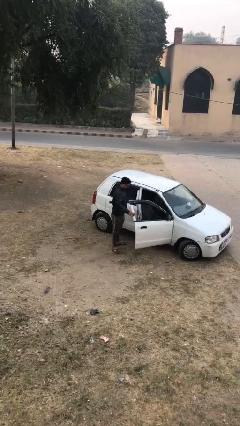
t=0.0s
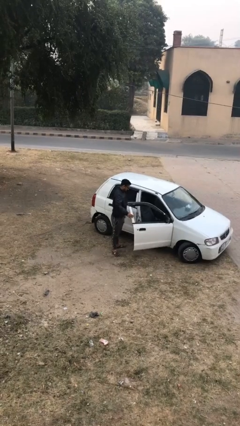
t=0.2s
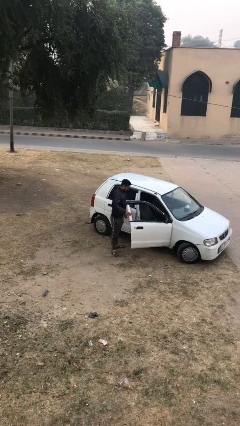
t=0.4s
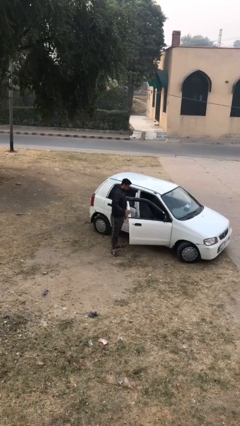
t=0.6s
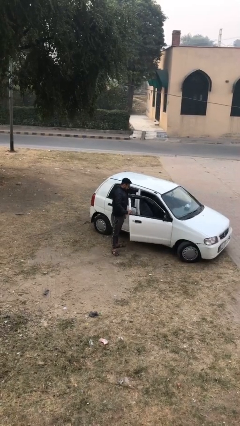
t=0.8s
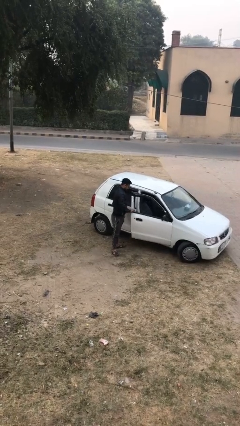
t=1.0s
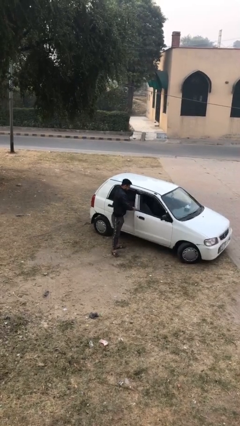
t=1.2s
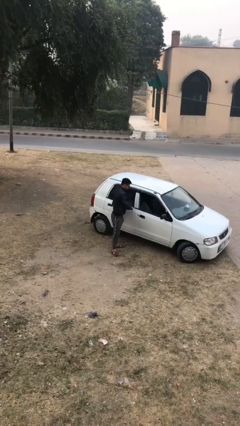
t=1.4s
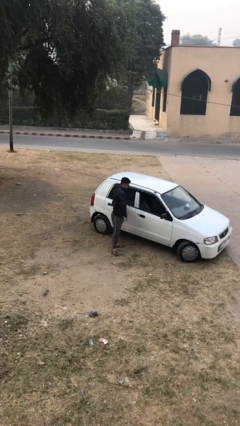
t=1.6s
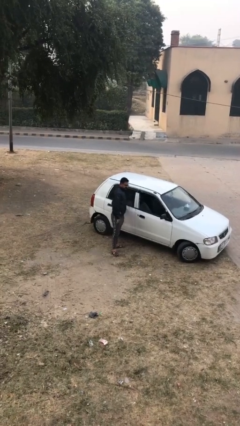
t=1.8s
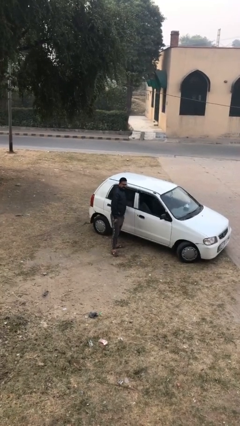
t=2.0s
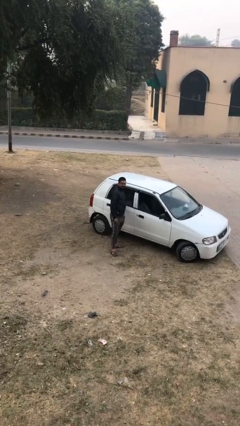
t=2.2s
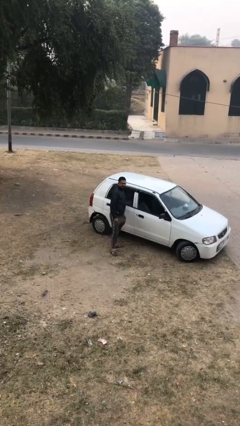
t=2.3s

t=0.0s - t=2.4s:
person closes car door

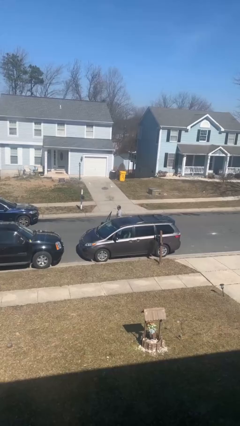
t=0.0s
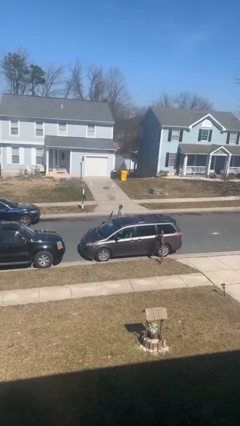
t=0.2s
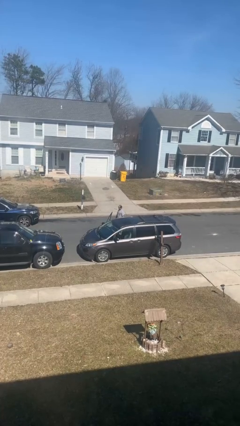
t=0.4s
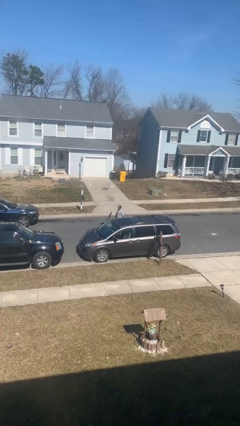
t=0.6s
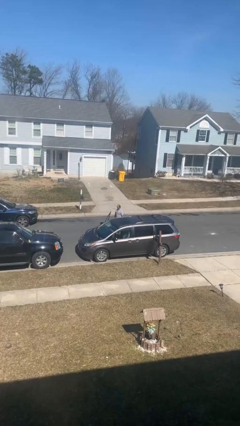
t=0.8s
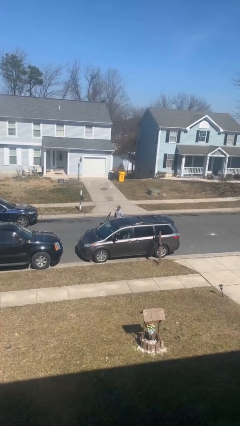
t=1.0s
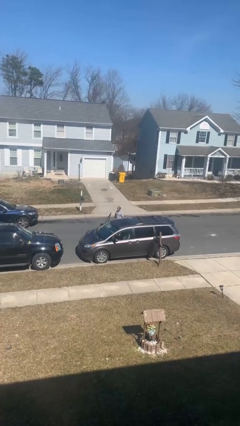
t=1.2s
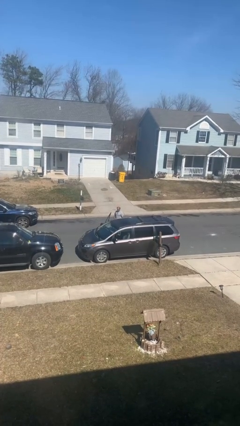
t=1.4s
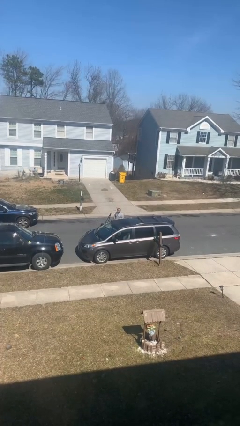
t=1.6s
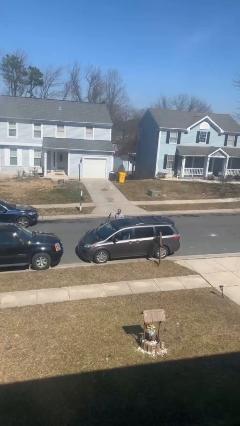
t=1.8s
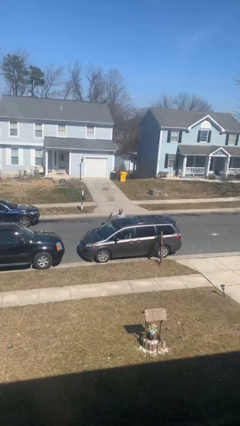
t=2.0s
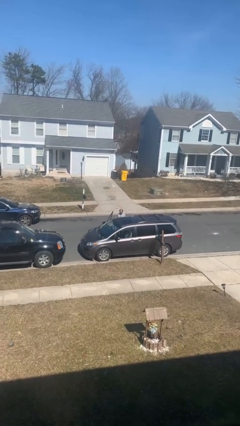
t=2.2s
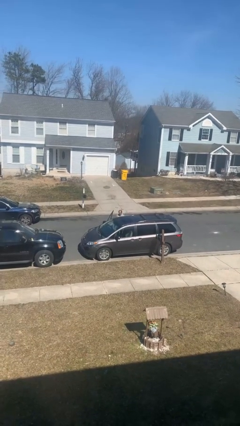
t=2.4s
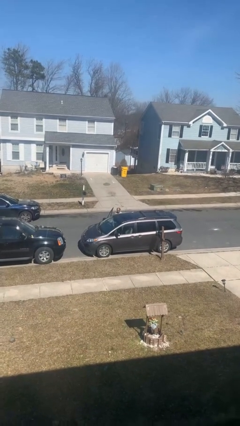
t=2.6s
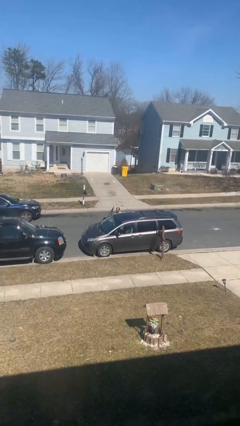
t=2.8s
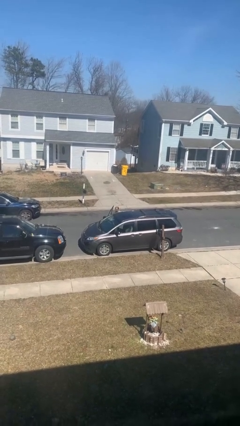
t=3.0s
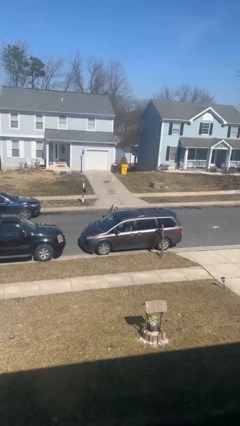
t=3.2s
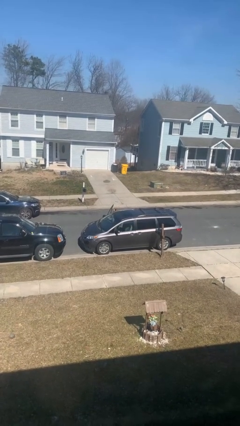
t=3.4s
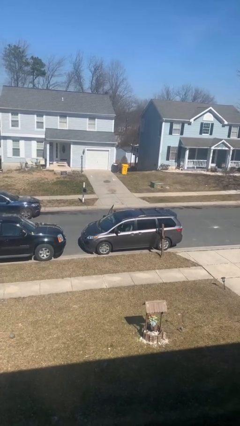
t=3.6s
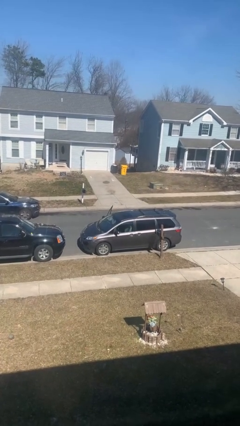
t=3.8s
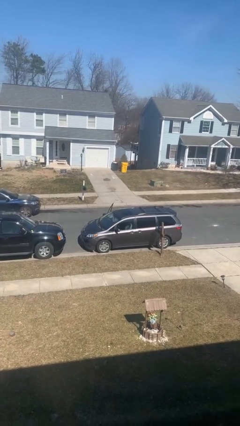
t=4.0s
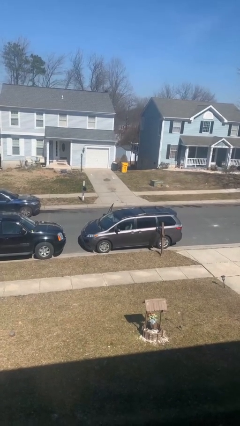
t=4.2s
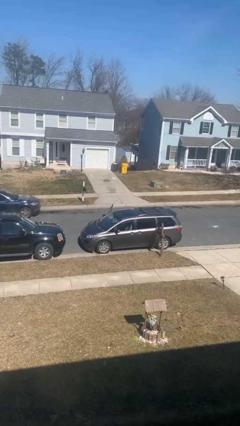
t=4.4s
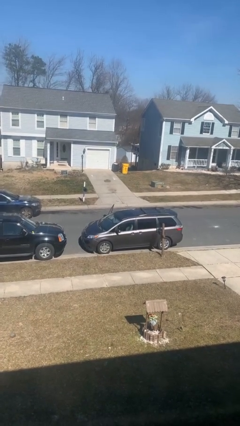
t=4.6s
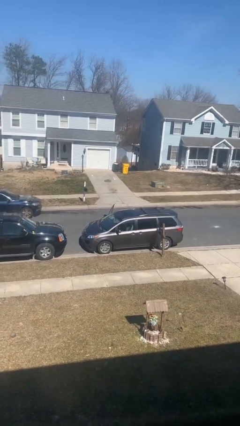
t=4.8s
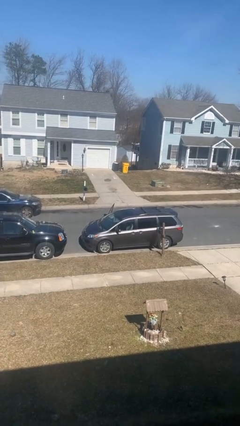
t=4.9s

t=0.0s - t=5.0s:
person enters car

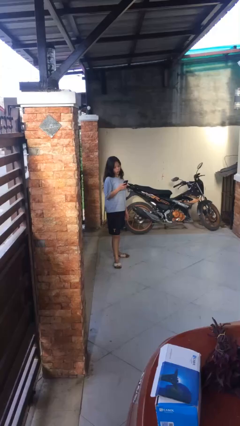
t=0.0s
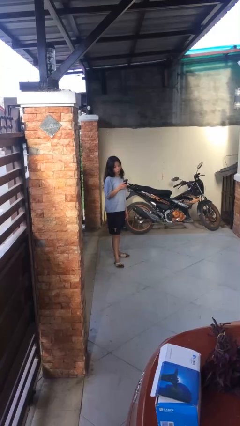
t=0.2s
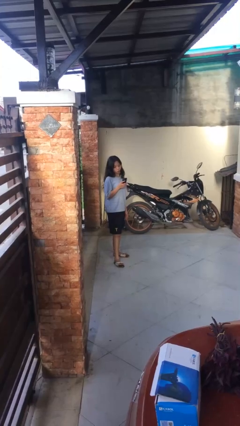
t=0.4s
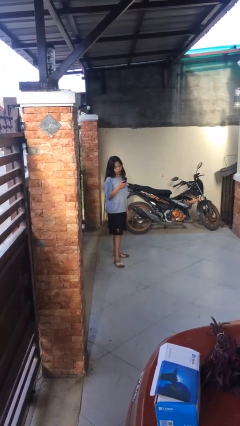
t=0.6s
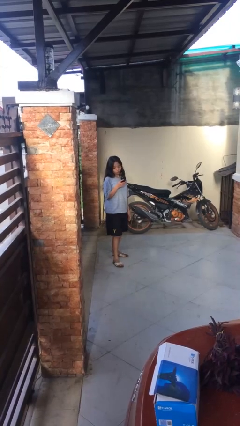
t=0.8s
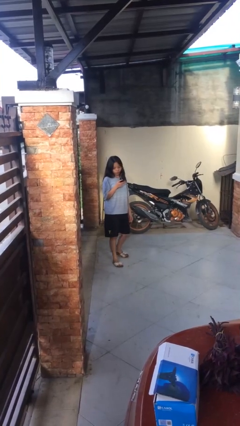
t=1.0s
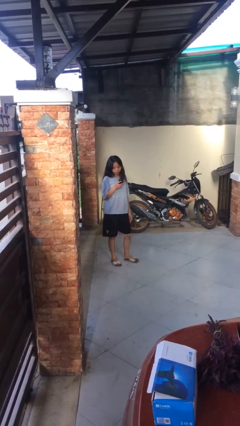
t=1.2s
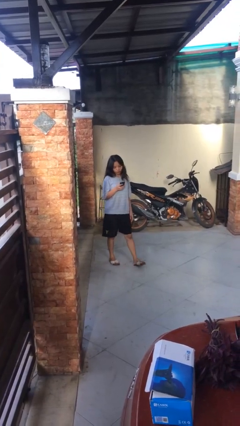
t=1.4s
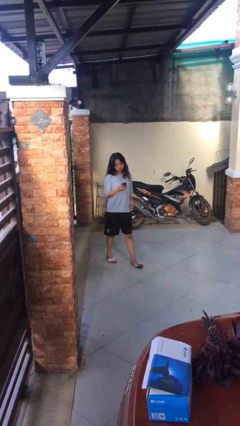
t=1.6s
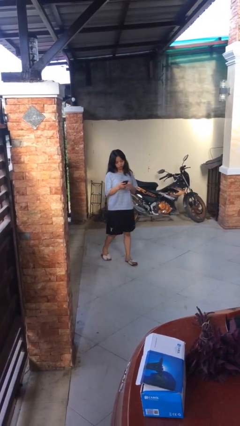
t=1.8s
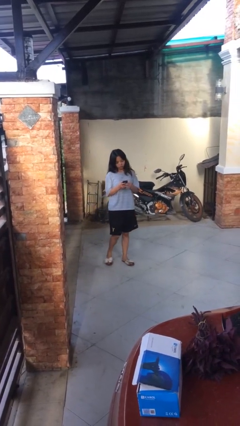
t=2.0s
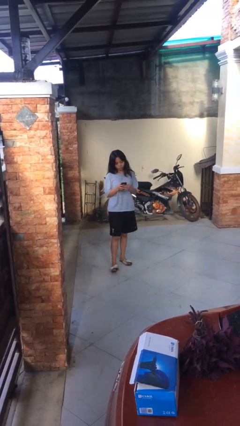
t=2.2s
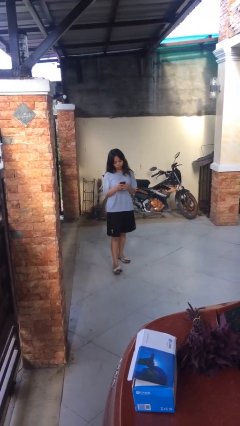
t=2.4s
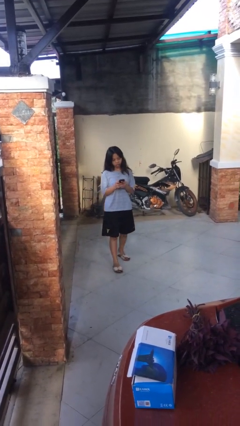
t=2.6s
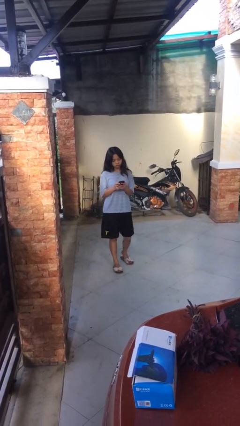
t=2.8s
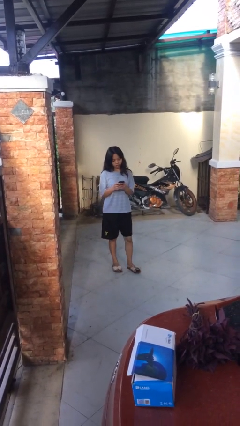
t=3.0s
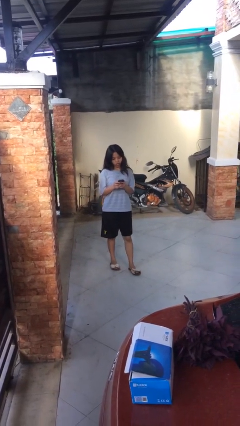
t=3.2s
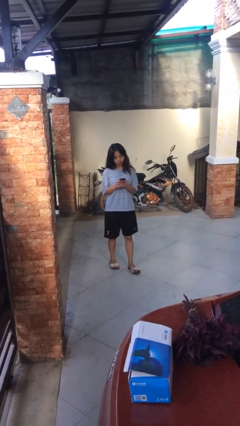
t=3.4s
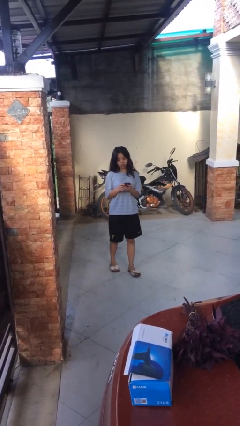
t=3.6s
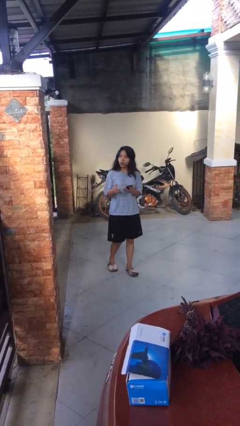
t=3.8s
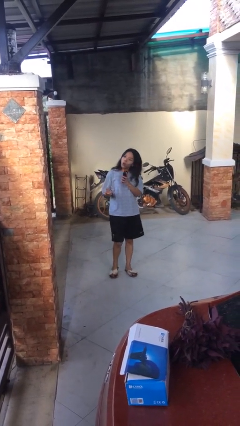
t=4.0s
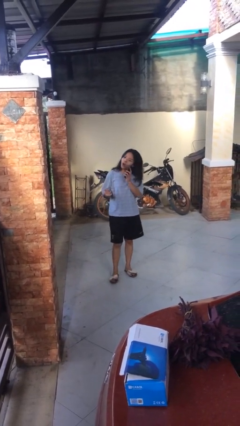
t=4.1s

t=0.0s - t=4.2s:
person texts on phone

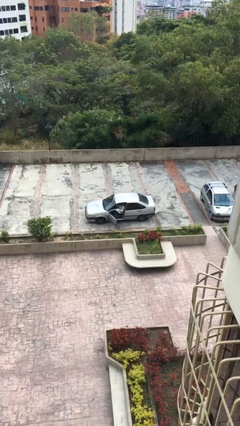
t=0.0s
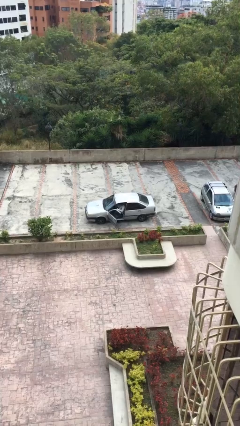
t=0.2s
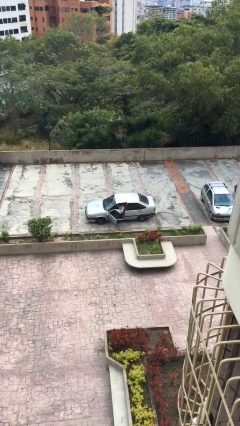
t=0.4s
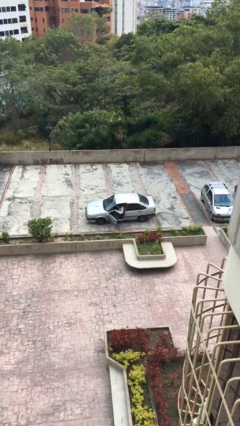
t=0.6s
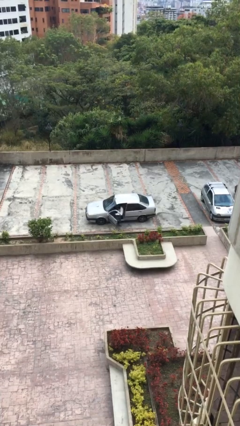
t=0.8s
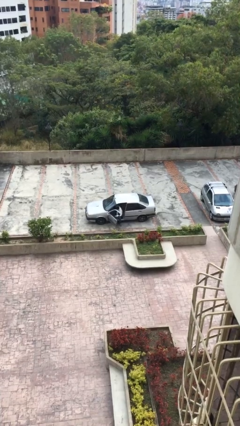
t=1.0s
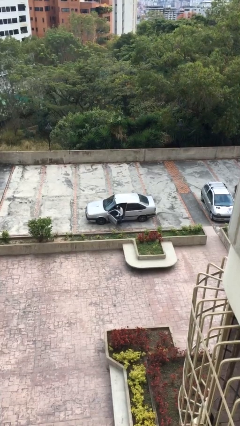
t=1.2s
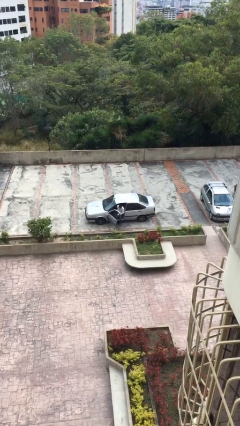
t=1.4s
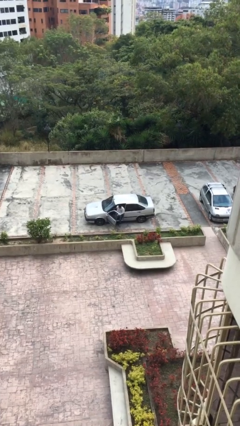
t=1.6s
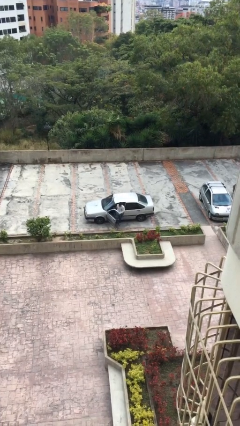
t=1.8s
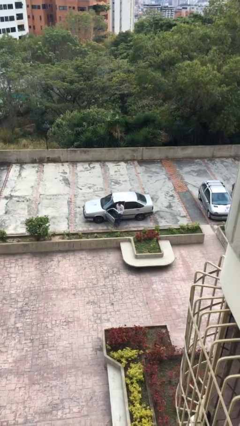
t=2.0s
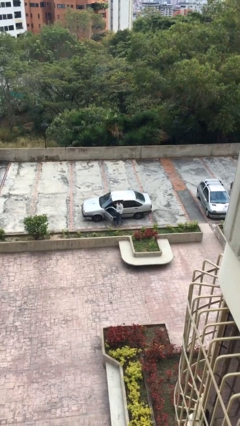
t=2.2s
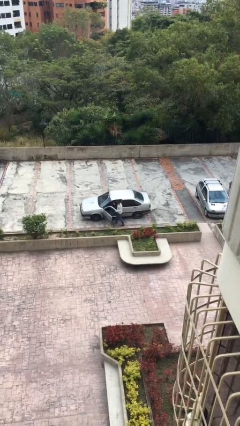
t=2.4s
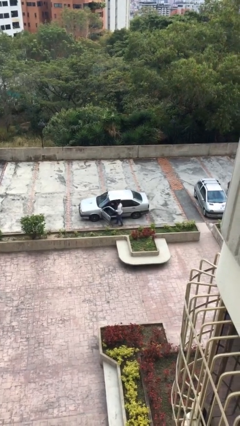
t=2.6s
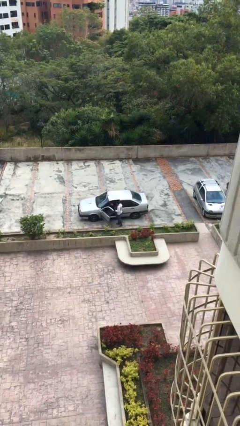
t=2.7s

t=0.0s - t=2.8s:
person exits car

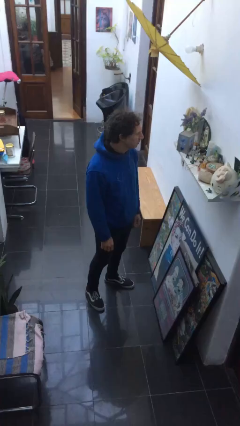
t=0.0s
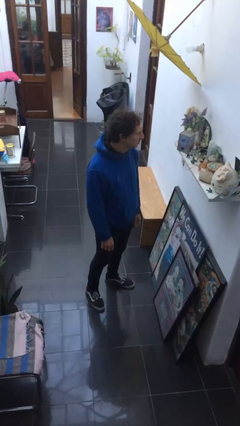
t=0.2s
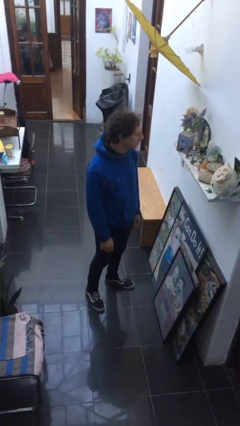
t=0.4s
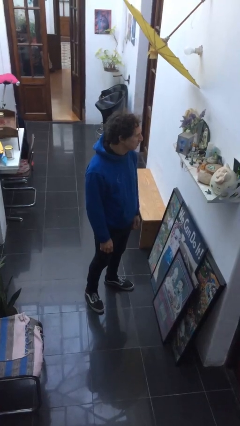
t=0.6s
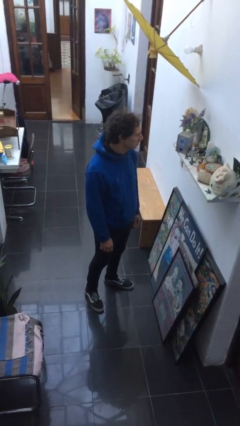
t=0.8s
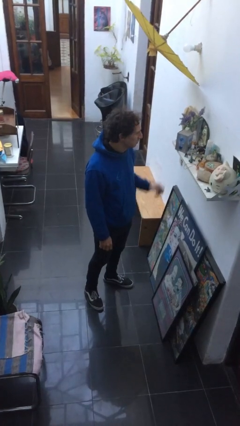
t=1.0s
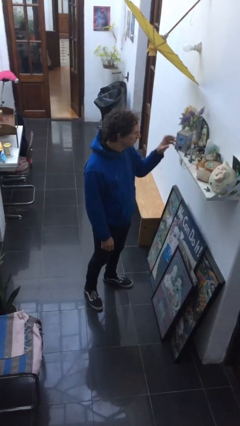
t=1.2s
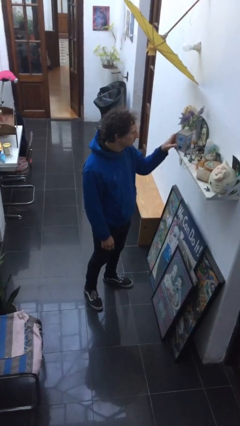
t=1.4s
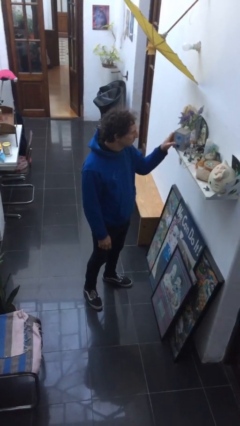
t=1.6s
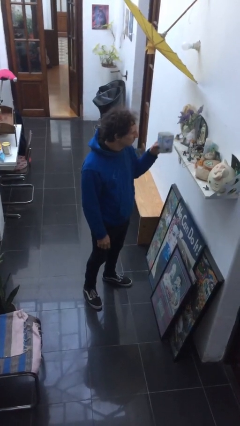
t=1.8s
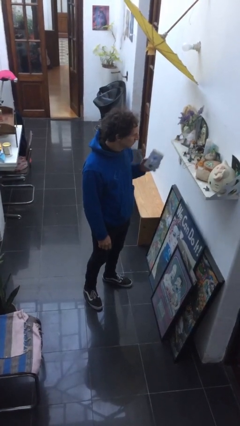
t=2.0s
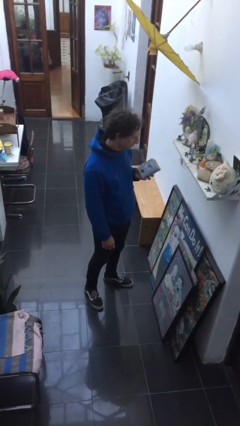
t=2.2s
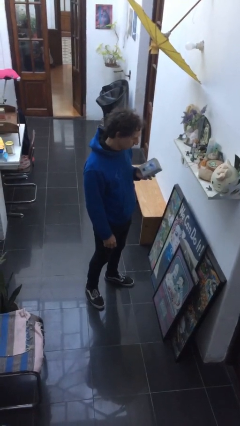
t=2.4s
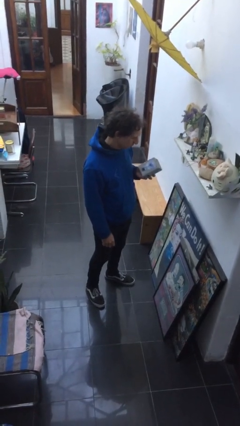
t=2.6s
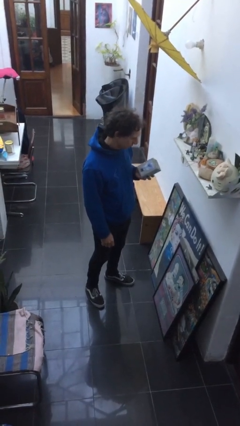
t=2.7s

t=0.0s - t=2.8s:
person picks up object from countertop
